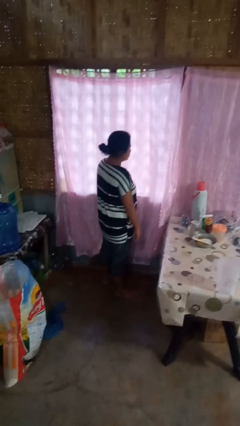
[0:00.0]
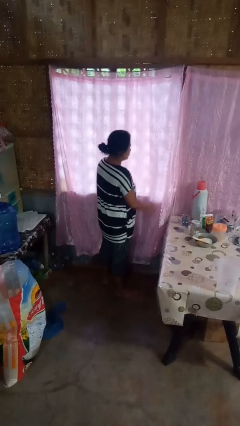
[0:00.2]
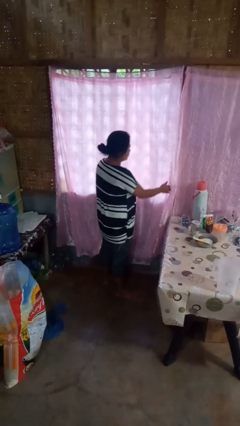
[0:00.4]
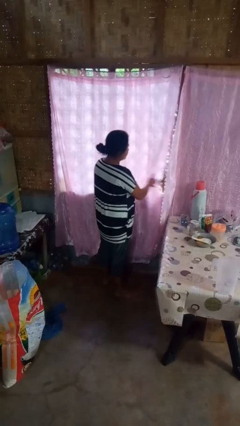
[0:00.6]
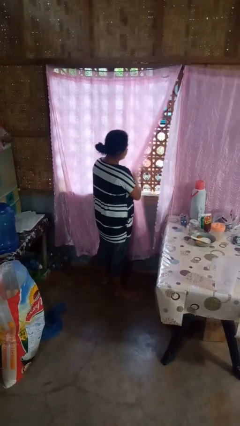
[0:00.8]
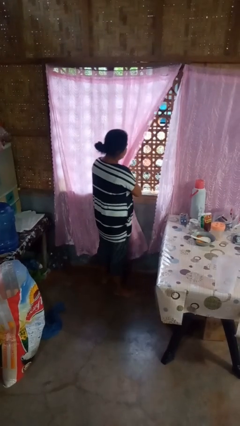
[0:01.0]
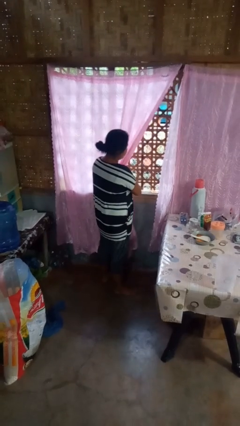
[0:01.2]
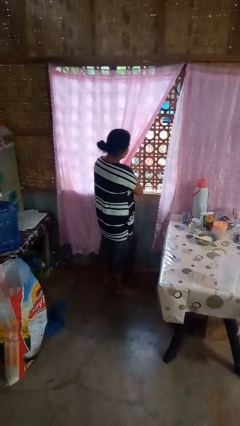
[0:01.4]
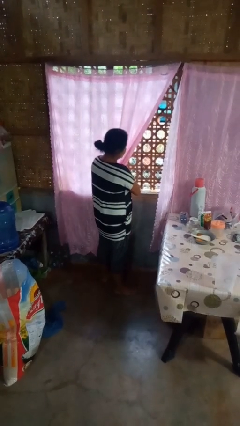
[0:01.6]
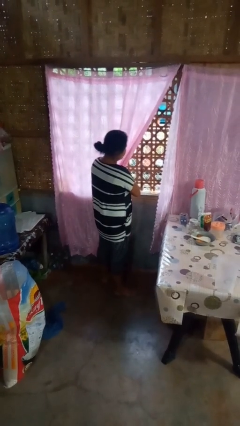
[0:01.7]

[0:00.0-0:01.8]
person opens curtains

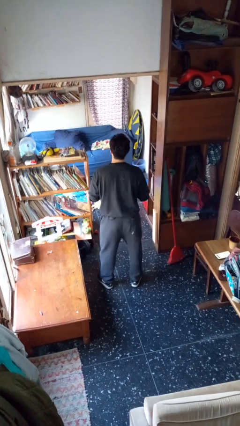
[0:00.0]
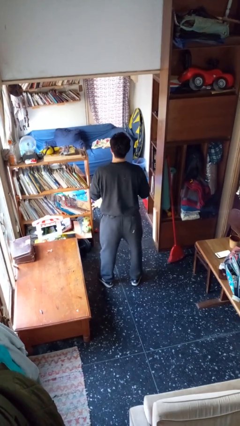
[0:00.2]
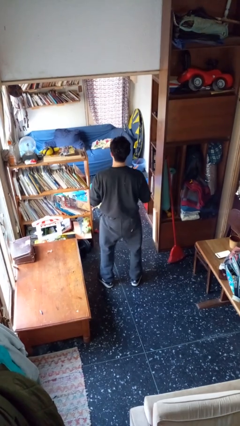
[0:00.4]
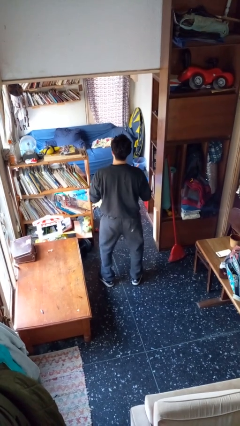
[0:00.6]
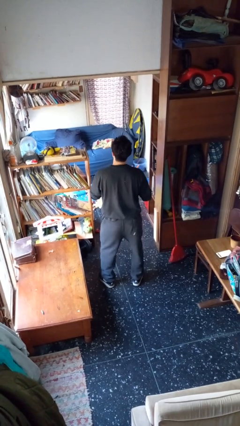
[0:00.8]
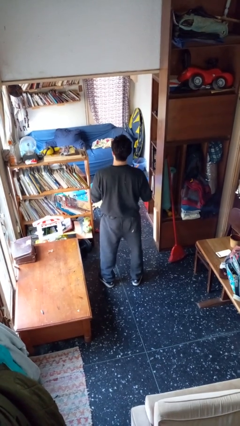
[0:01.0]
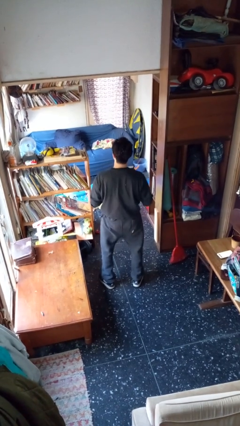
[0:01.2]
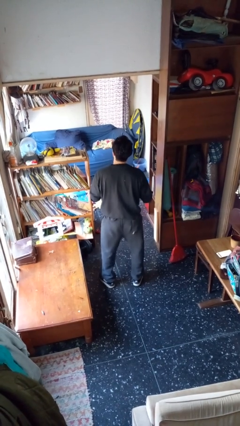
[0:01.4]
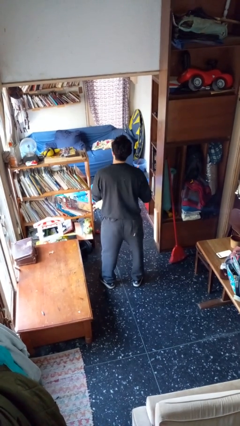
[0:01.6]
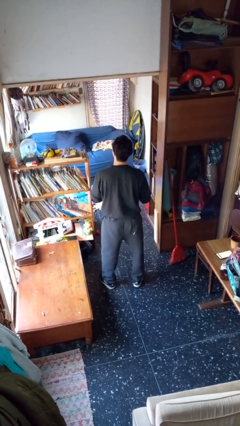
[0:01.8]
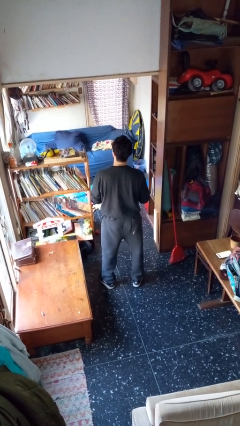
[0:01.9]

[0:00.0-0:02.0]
person wiggles hips

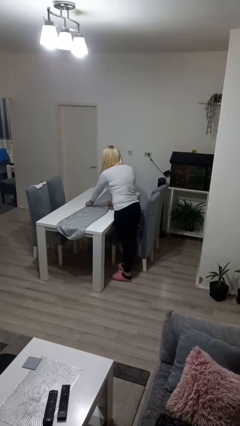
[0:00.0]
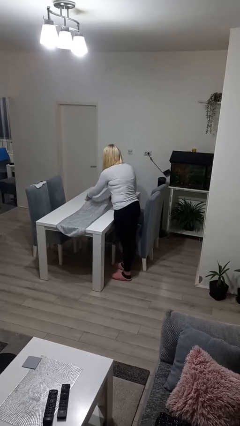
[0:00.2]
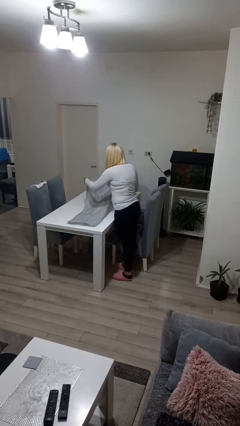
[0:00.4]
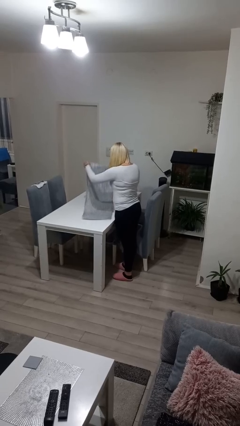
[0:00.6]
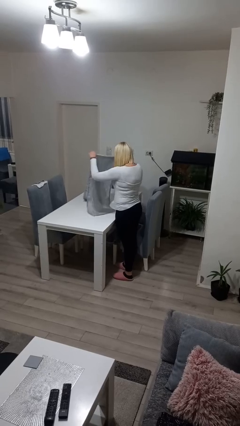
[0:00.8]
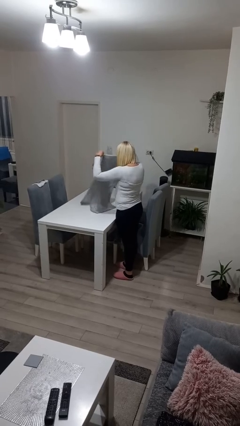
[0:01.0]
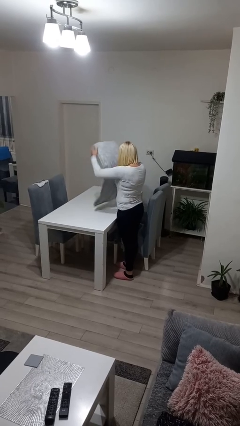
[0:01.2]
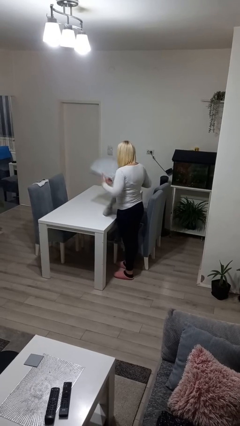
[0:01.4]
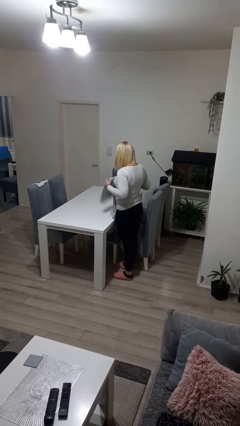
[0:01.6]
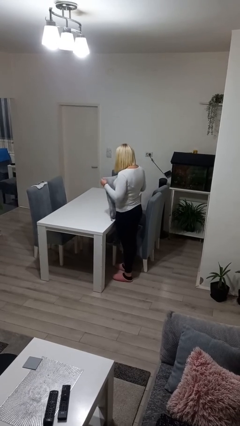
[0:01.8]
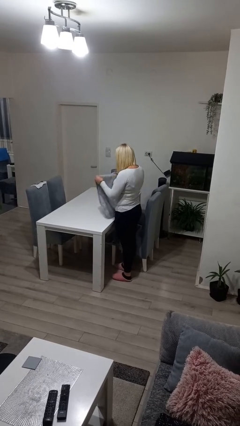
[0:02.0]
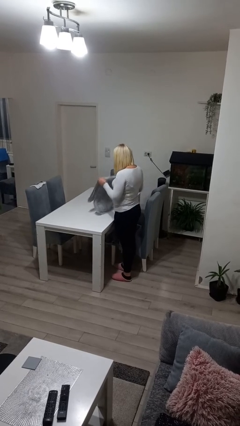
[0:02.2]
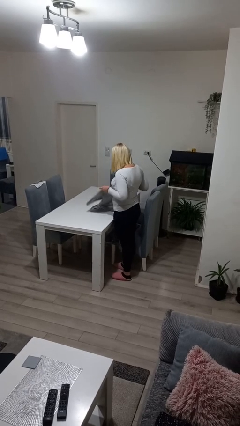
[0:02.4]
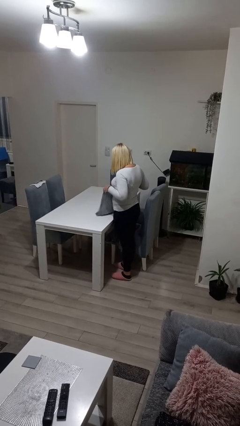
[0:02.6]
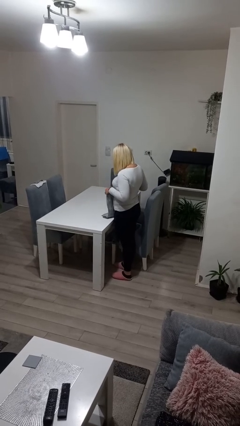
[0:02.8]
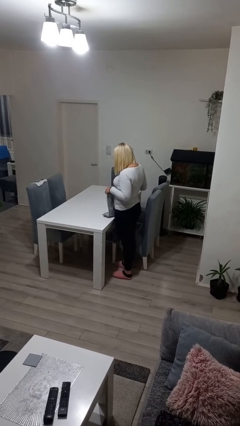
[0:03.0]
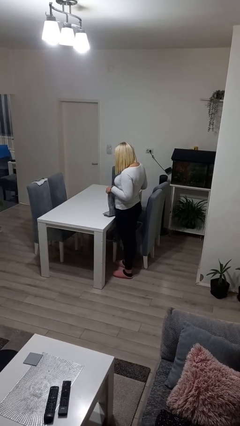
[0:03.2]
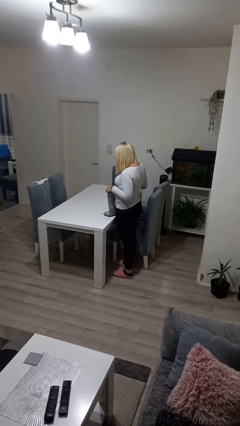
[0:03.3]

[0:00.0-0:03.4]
person folds tablecloth

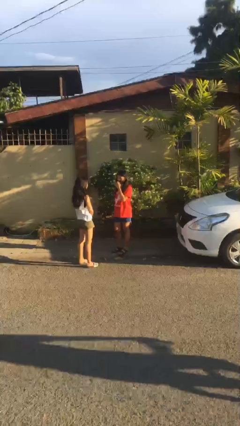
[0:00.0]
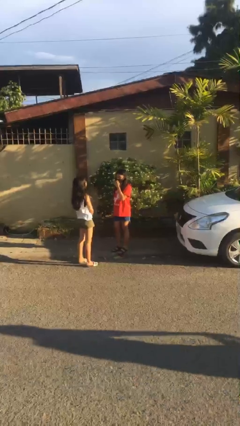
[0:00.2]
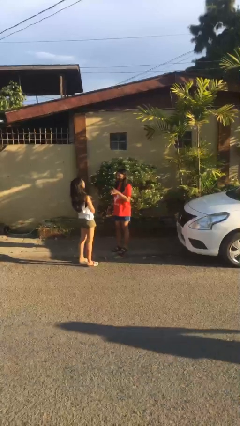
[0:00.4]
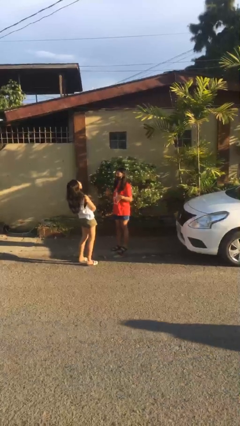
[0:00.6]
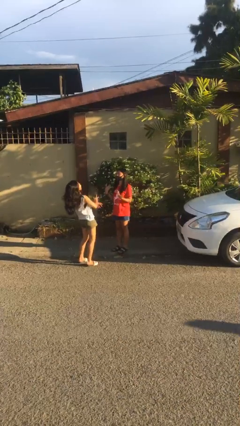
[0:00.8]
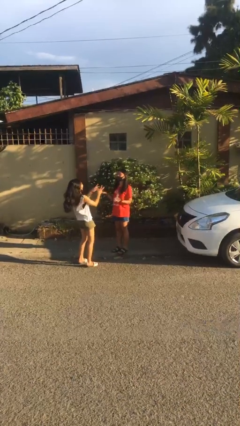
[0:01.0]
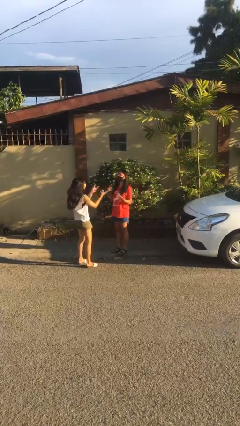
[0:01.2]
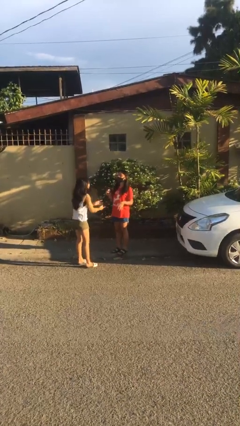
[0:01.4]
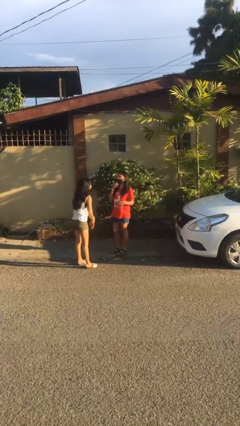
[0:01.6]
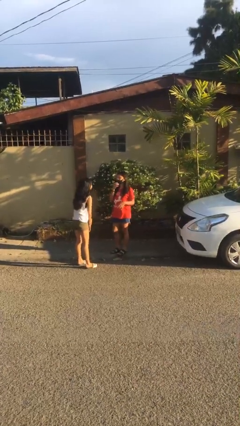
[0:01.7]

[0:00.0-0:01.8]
person laughs with person

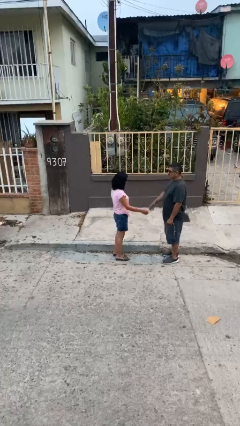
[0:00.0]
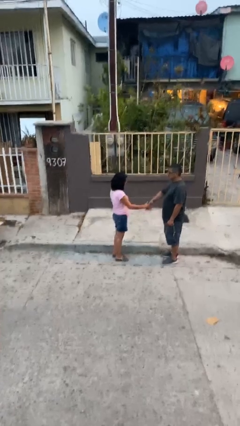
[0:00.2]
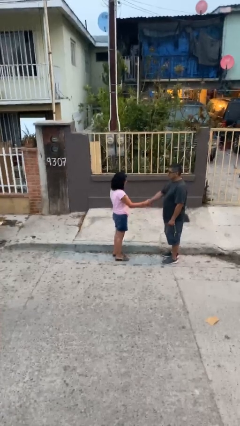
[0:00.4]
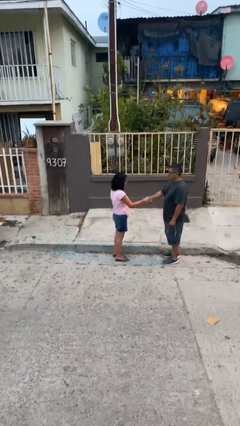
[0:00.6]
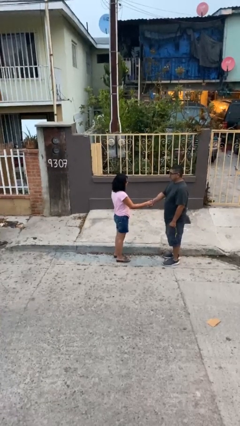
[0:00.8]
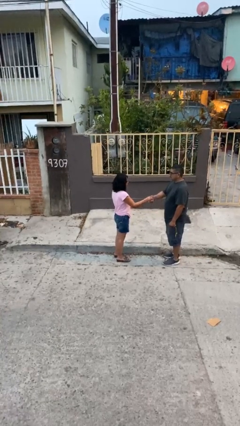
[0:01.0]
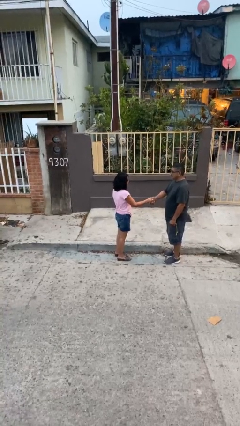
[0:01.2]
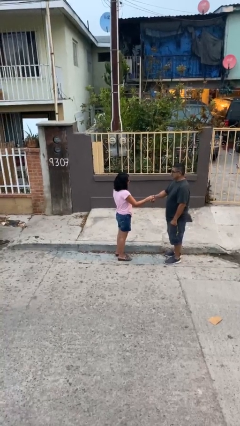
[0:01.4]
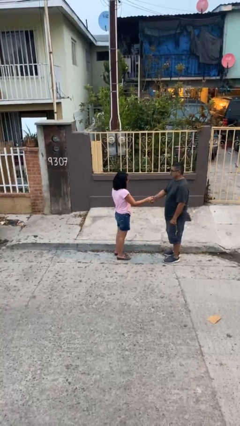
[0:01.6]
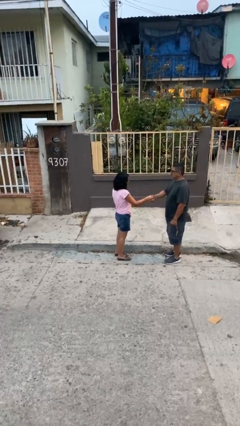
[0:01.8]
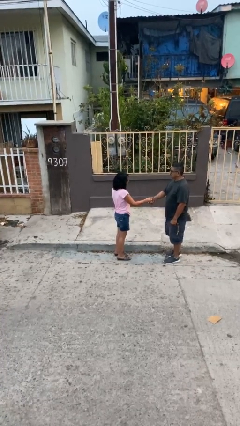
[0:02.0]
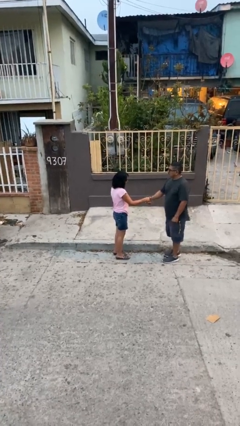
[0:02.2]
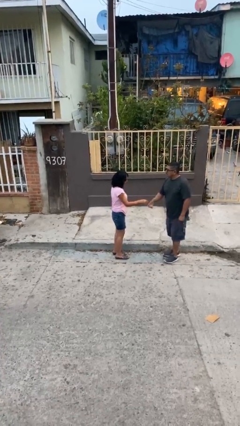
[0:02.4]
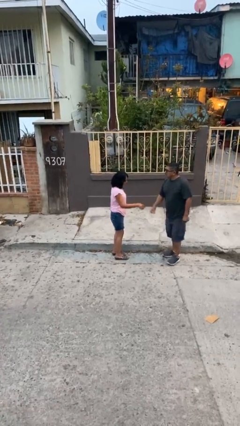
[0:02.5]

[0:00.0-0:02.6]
person shakes hand

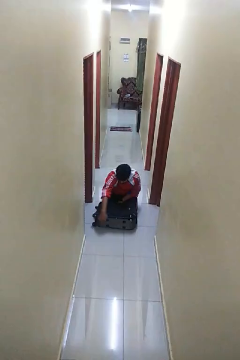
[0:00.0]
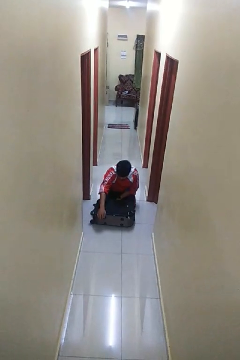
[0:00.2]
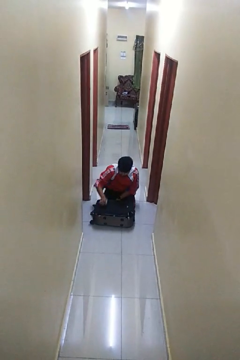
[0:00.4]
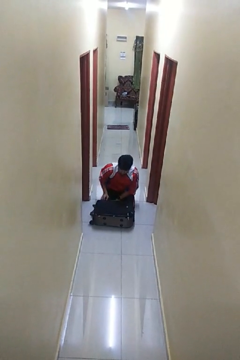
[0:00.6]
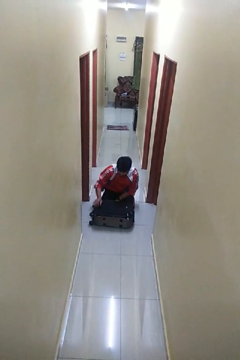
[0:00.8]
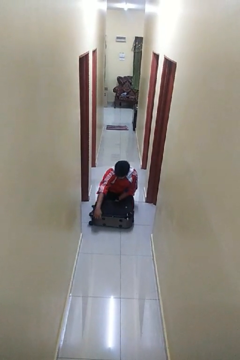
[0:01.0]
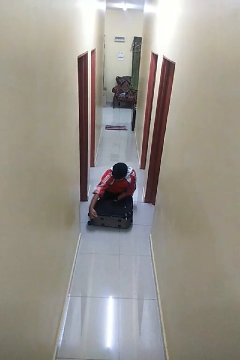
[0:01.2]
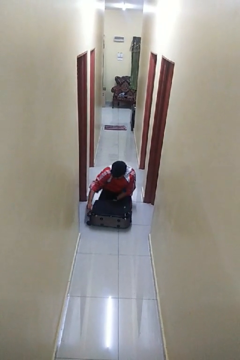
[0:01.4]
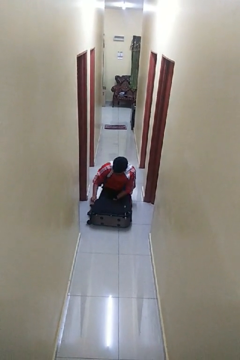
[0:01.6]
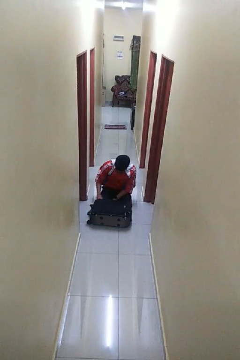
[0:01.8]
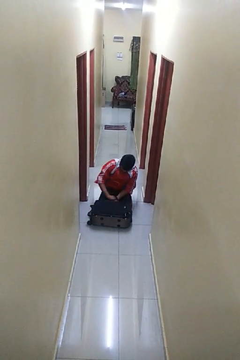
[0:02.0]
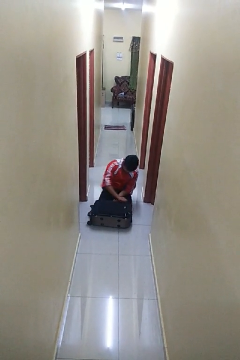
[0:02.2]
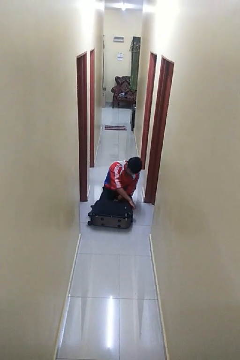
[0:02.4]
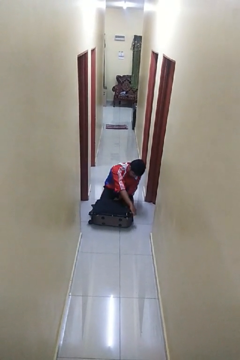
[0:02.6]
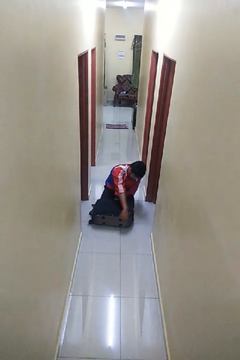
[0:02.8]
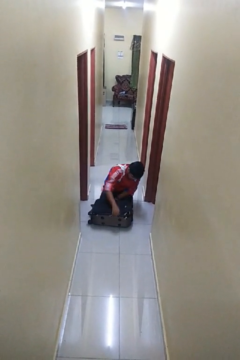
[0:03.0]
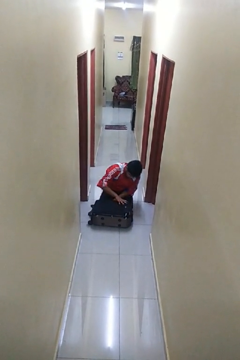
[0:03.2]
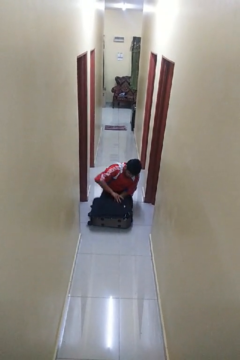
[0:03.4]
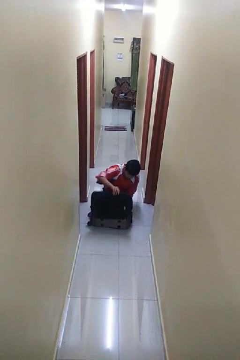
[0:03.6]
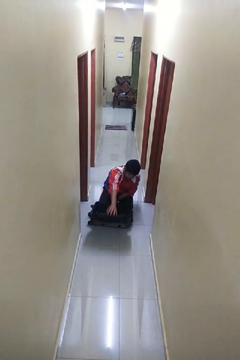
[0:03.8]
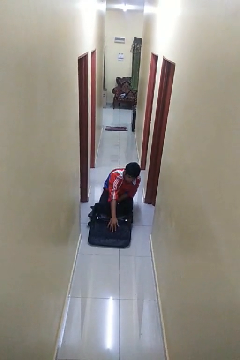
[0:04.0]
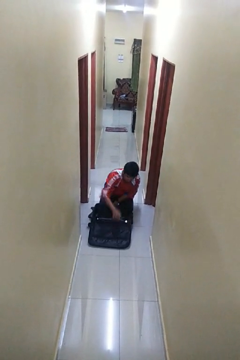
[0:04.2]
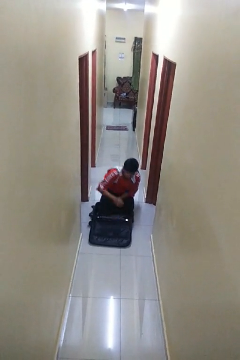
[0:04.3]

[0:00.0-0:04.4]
person opens suitcase

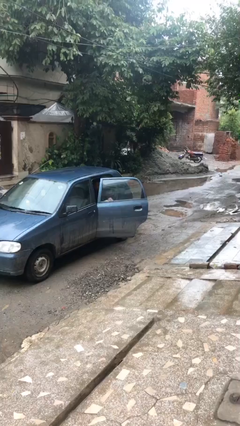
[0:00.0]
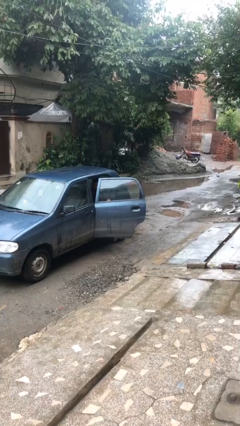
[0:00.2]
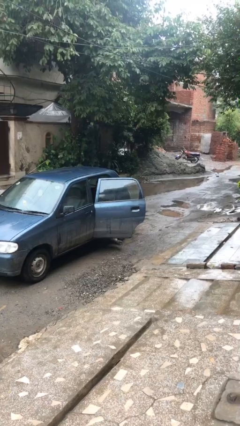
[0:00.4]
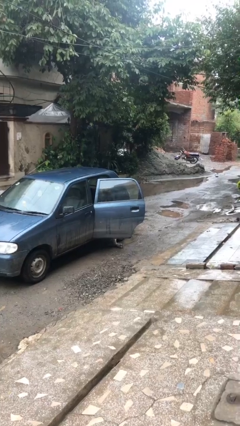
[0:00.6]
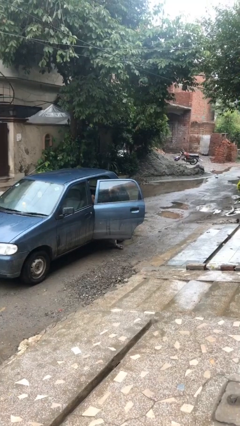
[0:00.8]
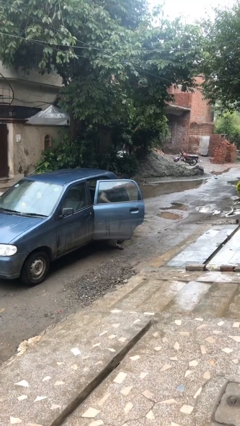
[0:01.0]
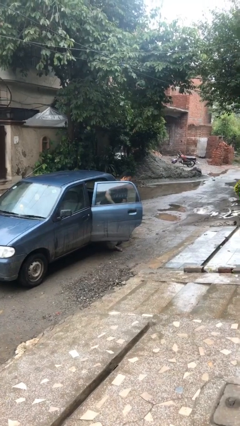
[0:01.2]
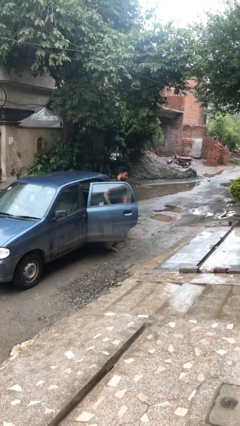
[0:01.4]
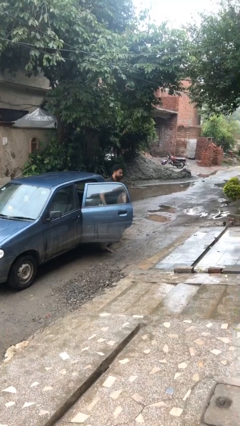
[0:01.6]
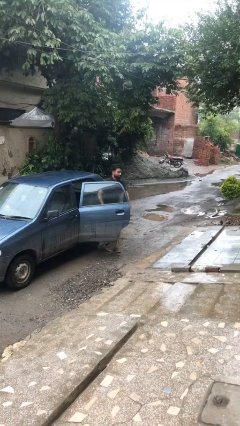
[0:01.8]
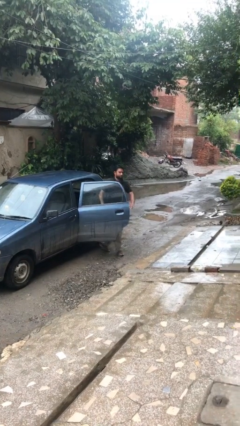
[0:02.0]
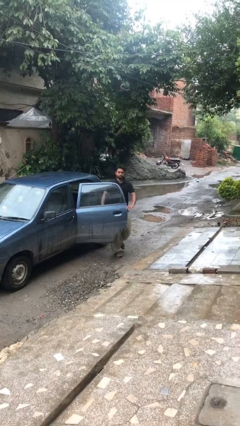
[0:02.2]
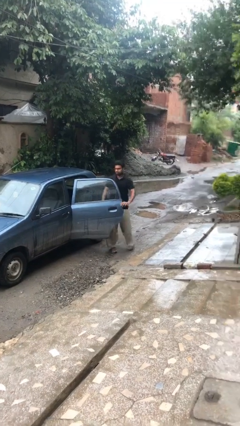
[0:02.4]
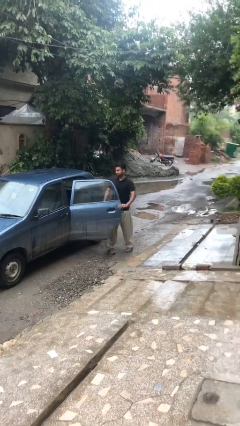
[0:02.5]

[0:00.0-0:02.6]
person exits car
